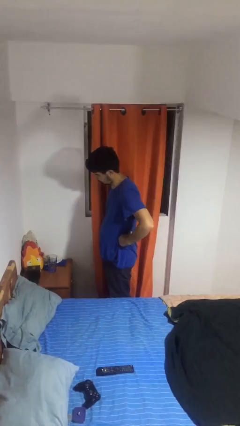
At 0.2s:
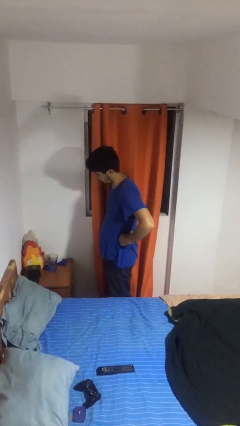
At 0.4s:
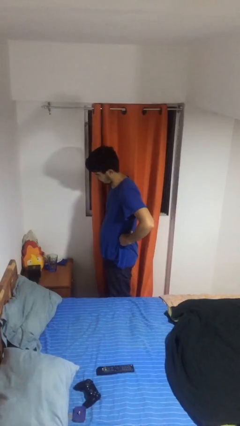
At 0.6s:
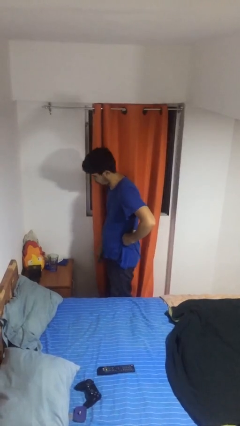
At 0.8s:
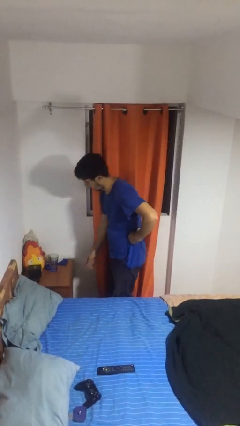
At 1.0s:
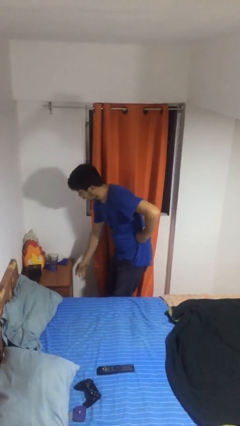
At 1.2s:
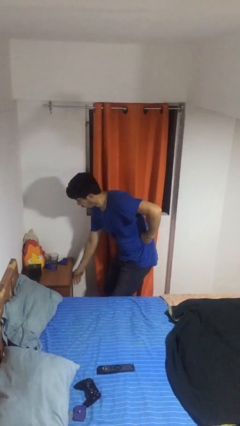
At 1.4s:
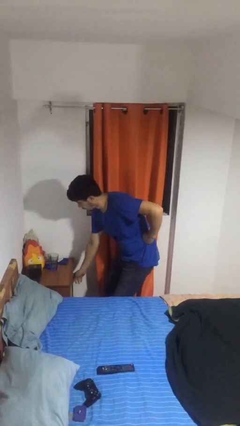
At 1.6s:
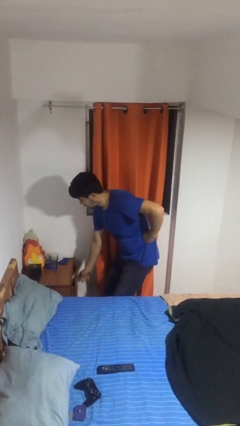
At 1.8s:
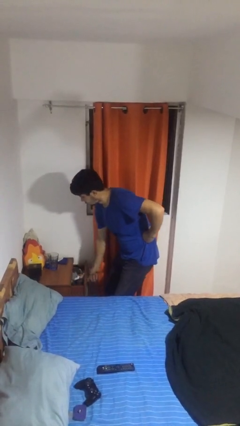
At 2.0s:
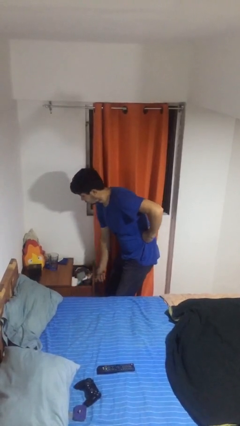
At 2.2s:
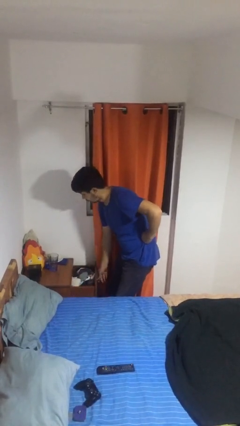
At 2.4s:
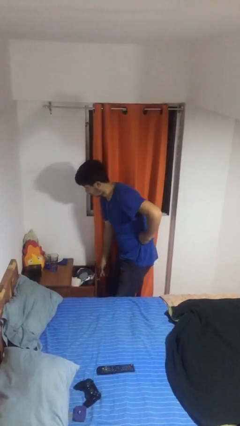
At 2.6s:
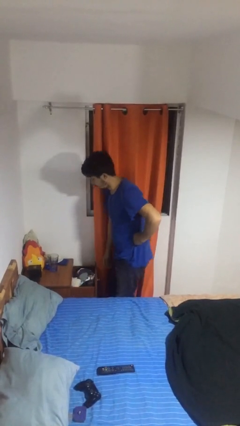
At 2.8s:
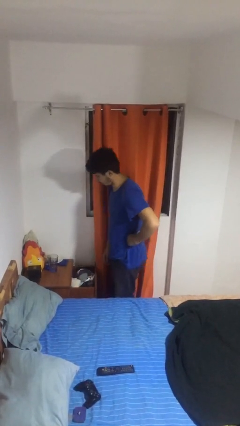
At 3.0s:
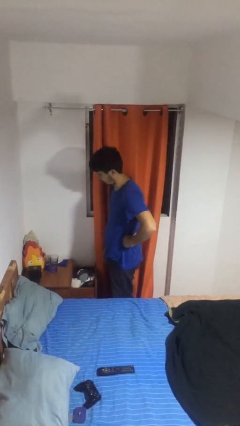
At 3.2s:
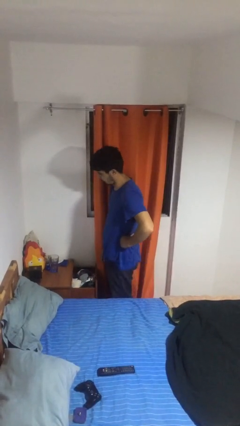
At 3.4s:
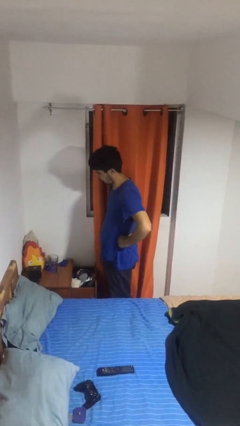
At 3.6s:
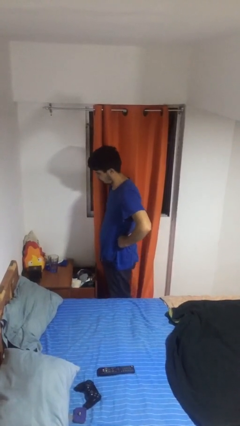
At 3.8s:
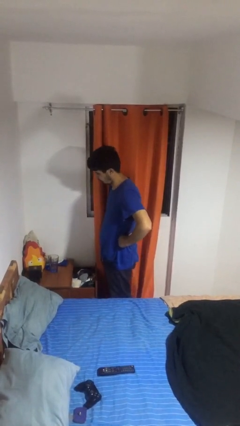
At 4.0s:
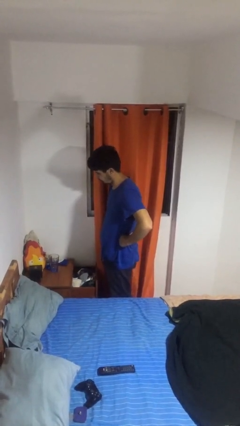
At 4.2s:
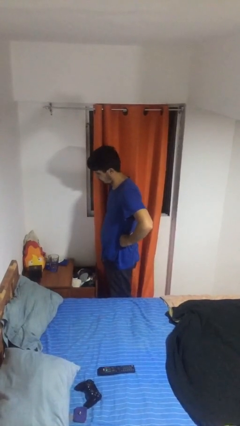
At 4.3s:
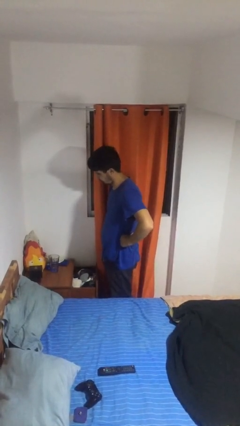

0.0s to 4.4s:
person opens dresser drawer

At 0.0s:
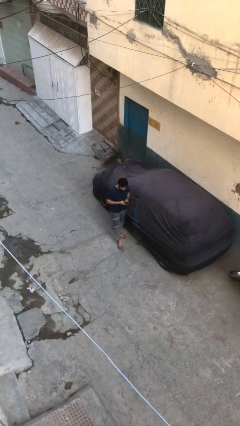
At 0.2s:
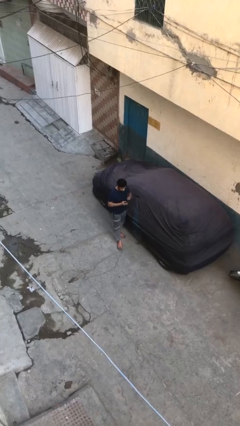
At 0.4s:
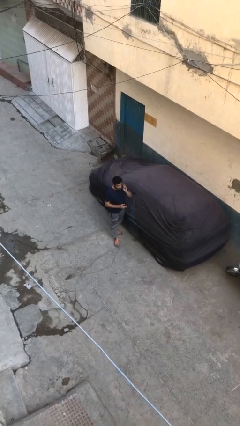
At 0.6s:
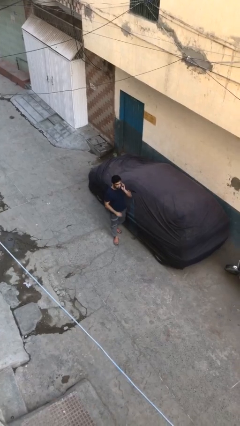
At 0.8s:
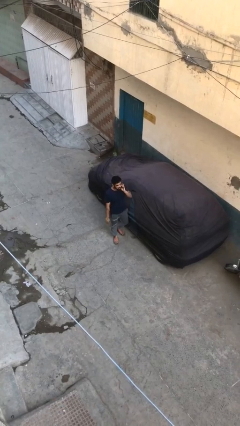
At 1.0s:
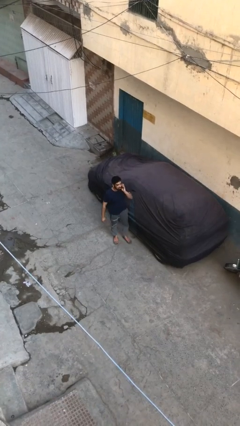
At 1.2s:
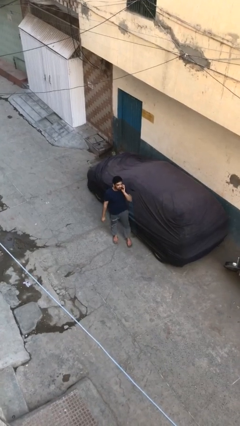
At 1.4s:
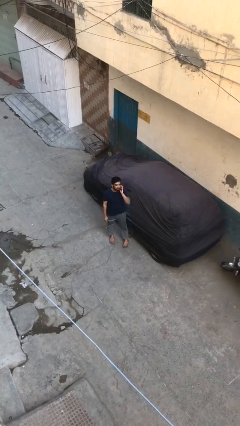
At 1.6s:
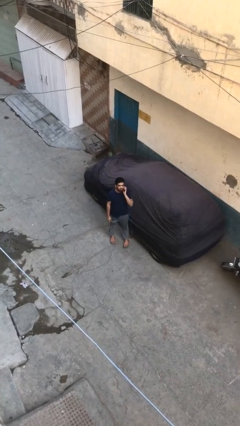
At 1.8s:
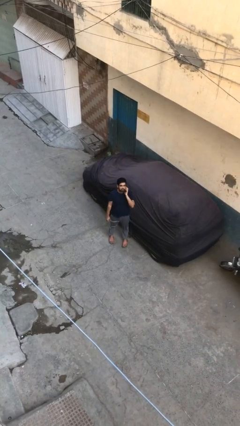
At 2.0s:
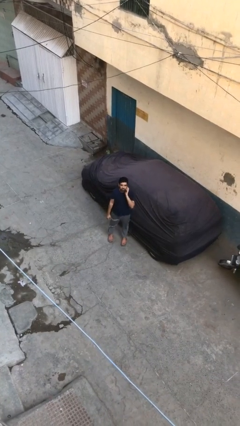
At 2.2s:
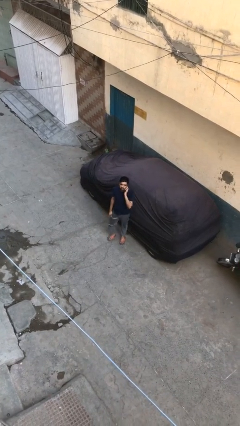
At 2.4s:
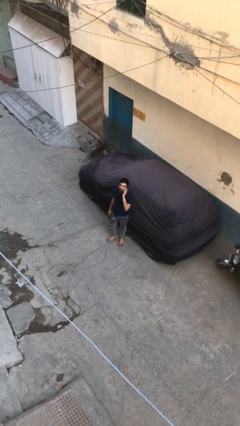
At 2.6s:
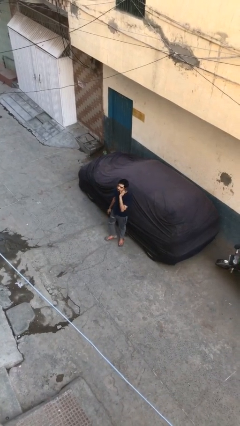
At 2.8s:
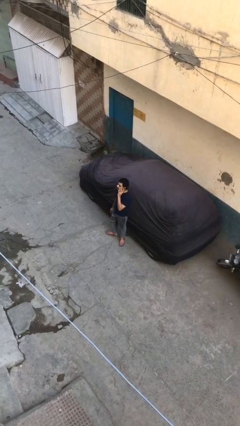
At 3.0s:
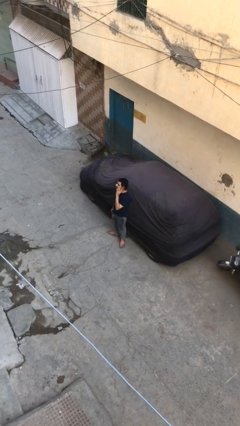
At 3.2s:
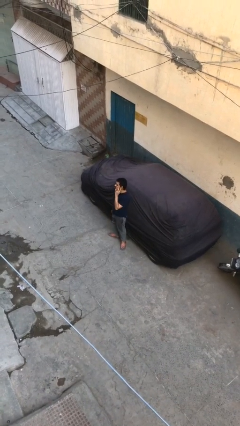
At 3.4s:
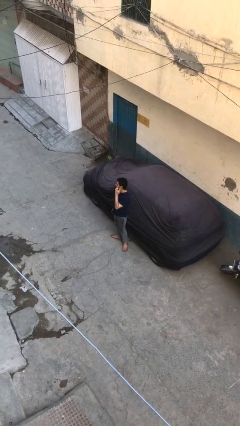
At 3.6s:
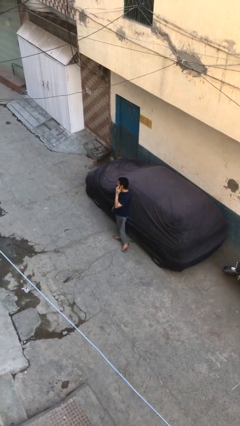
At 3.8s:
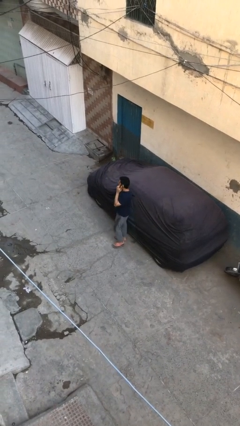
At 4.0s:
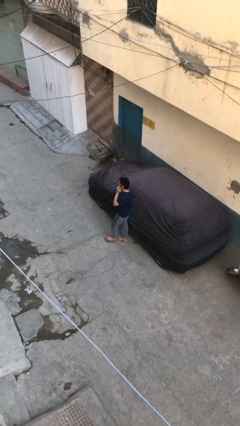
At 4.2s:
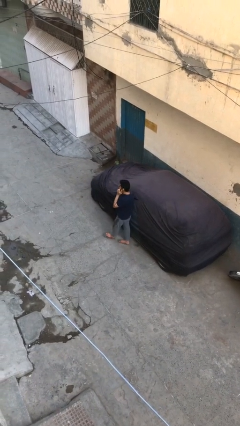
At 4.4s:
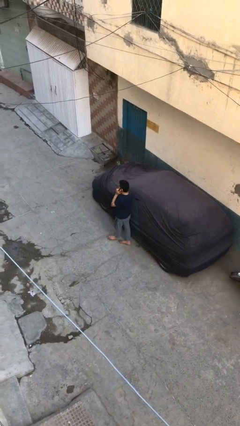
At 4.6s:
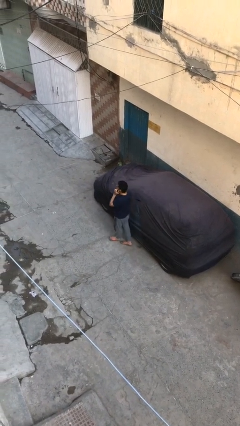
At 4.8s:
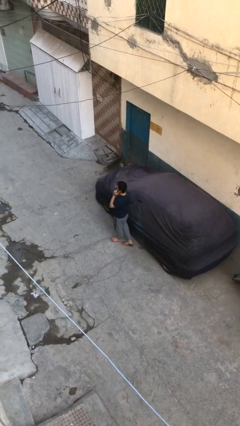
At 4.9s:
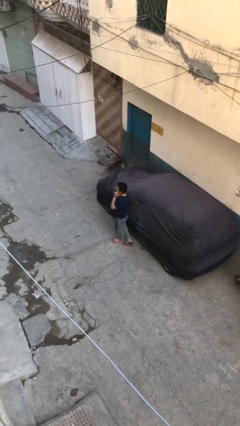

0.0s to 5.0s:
person talks on phone

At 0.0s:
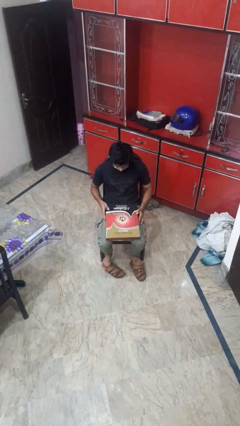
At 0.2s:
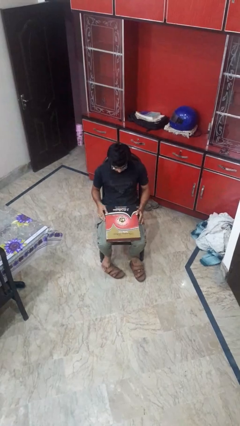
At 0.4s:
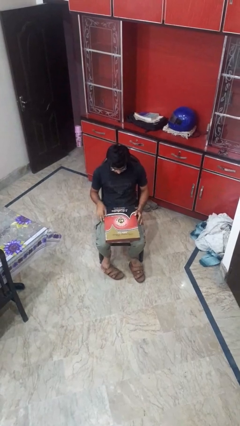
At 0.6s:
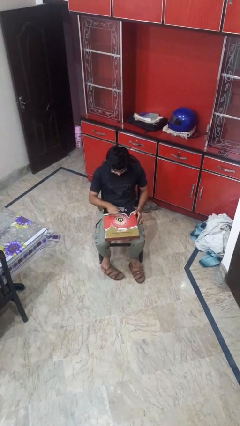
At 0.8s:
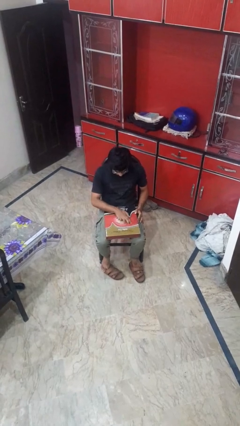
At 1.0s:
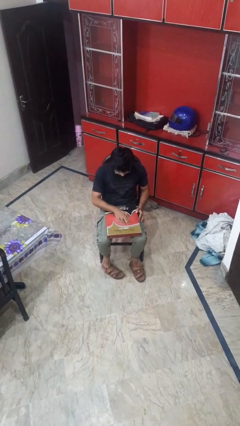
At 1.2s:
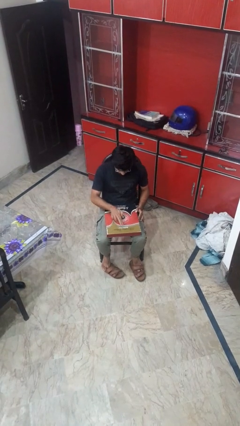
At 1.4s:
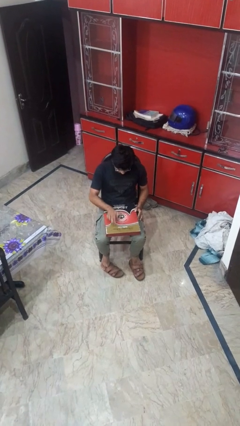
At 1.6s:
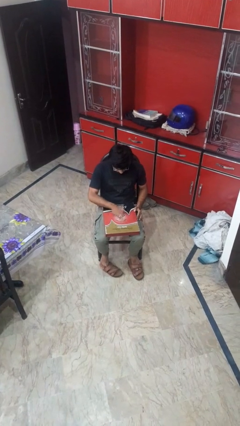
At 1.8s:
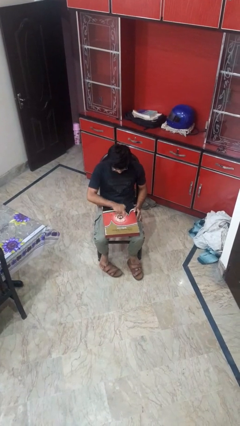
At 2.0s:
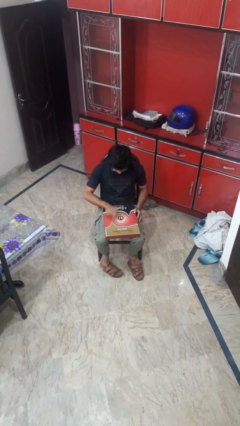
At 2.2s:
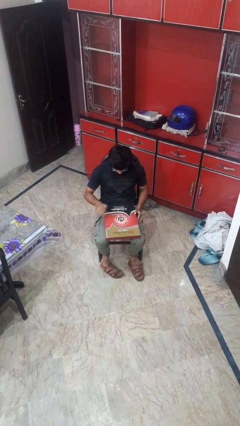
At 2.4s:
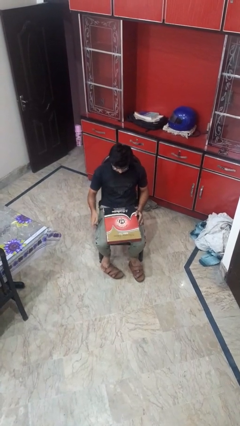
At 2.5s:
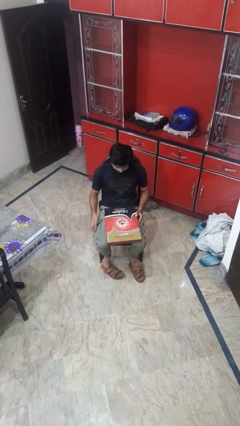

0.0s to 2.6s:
person taps object with finger

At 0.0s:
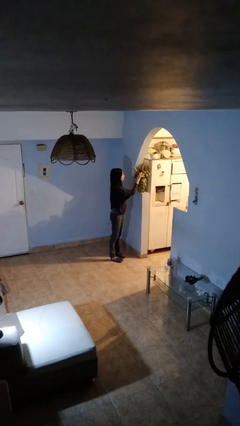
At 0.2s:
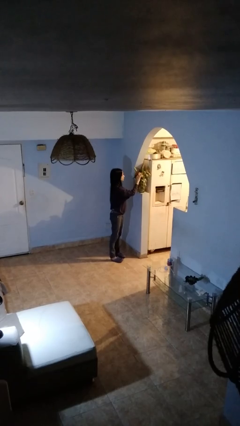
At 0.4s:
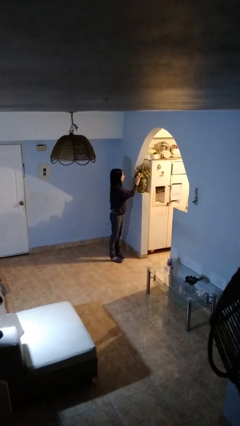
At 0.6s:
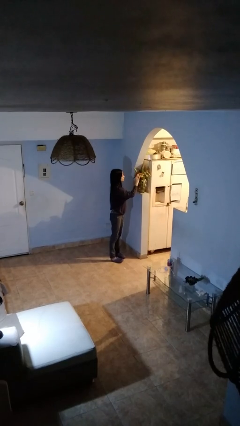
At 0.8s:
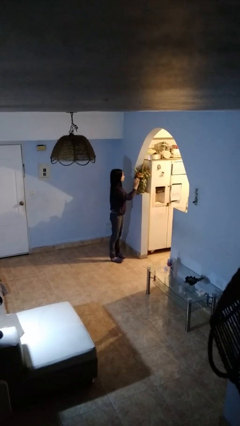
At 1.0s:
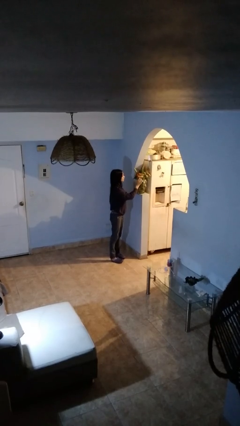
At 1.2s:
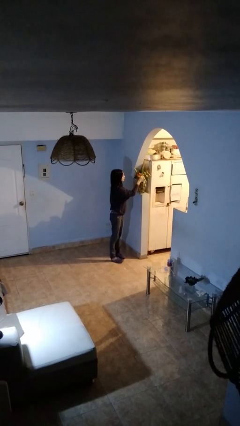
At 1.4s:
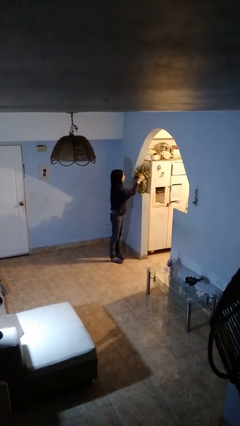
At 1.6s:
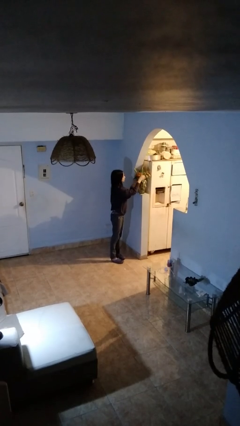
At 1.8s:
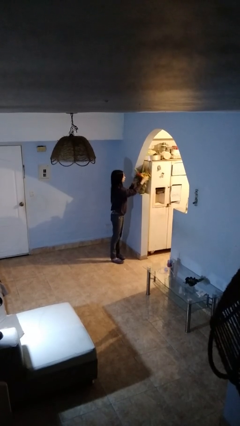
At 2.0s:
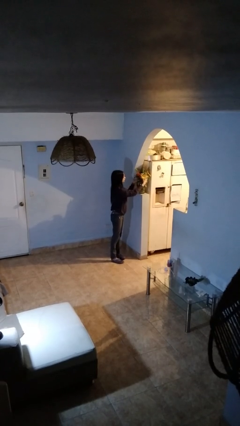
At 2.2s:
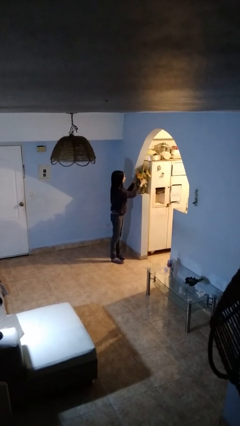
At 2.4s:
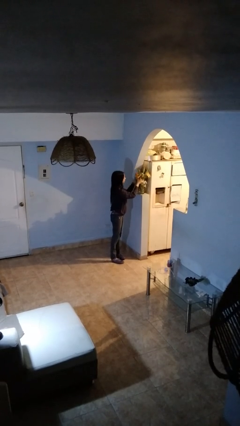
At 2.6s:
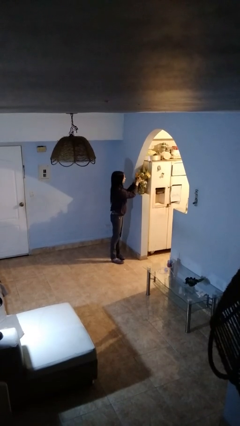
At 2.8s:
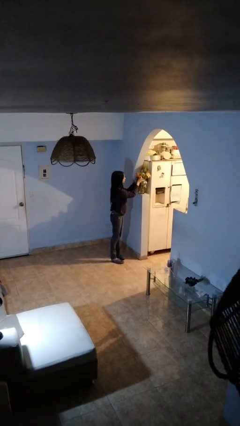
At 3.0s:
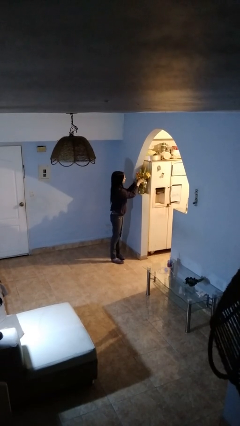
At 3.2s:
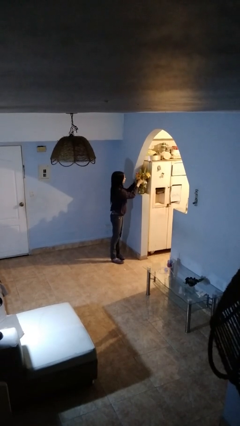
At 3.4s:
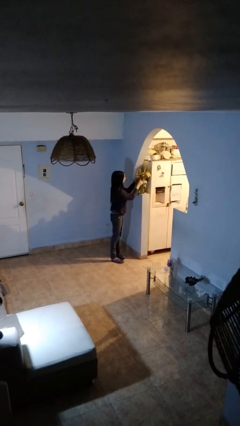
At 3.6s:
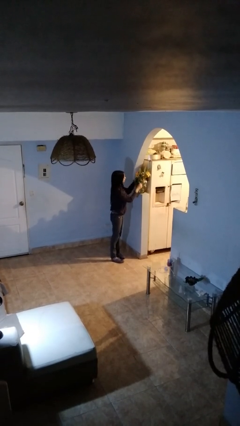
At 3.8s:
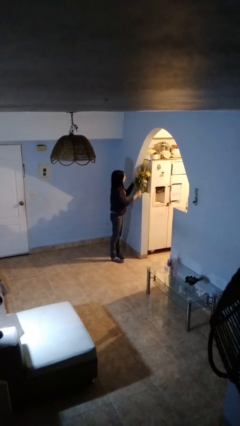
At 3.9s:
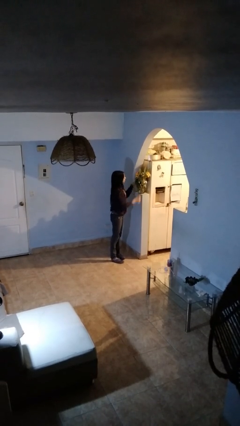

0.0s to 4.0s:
person arranges flowers in vase

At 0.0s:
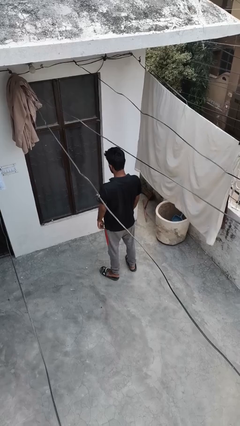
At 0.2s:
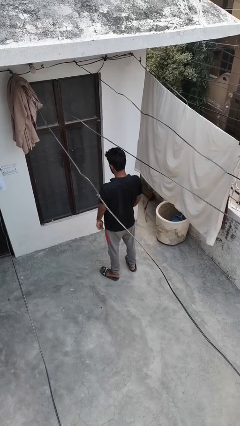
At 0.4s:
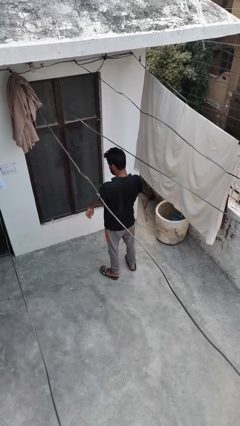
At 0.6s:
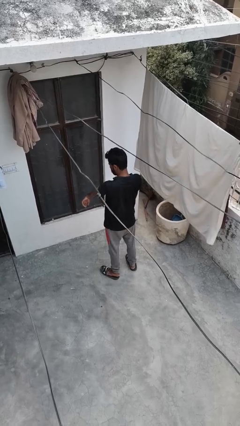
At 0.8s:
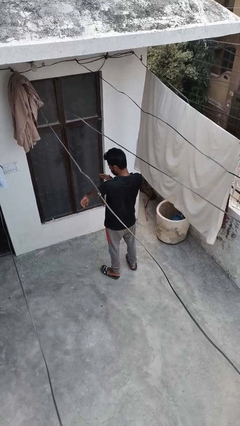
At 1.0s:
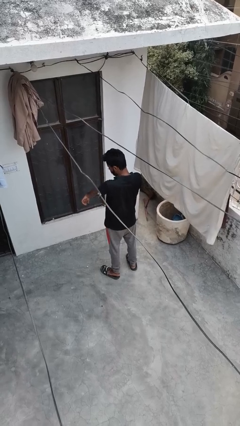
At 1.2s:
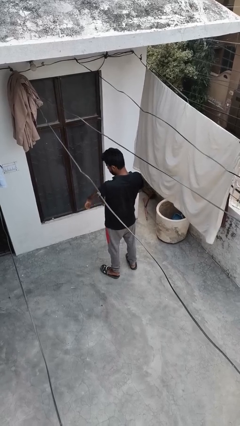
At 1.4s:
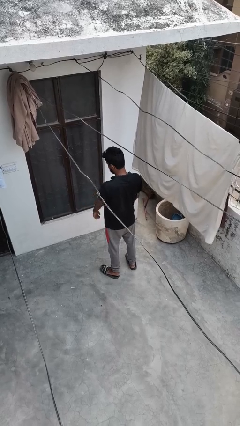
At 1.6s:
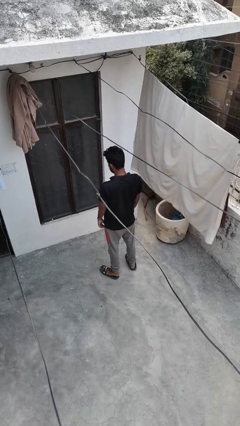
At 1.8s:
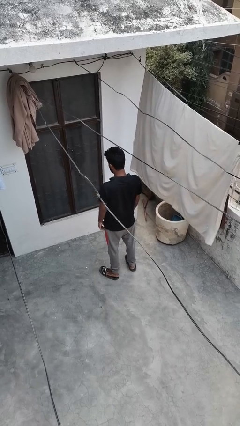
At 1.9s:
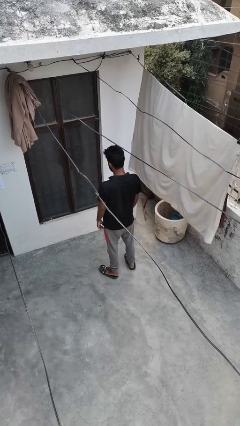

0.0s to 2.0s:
person swats bug
